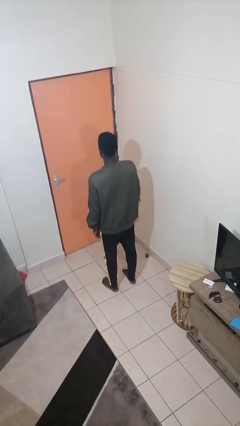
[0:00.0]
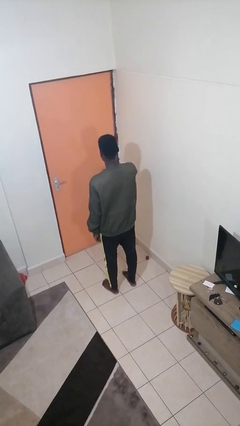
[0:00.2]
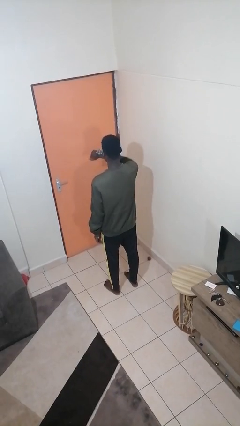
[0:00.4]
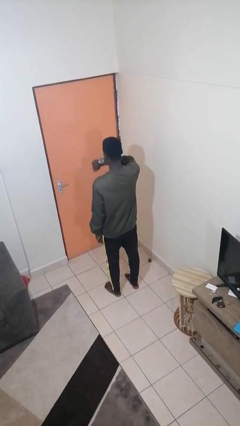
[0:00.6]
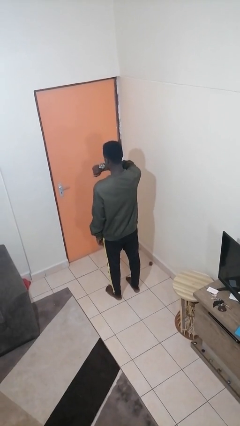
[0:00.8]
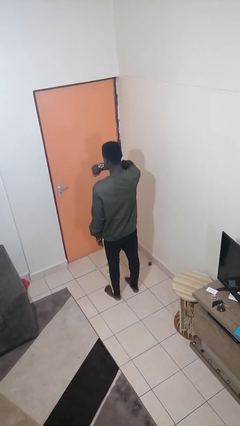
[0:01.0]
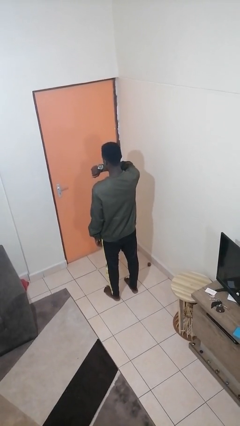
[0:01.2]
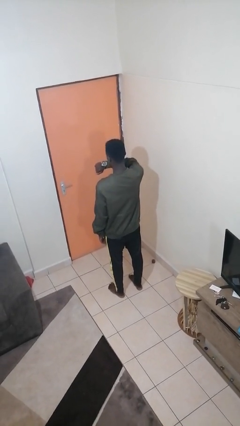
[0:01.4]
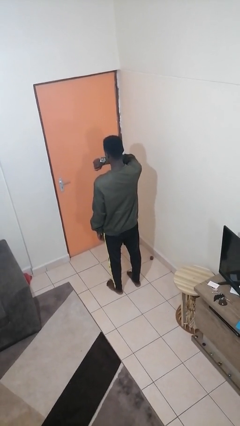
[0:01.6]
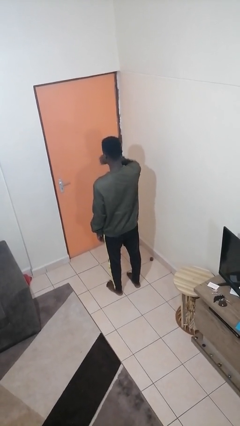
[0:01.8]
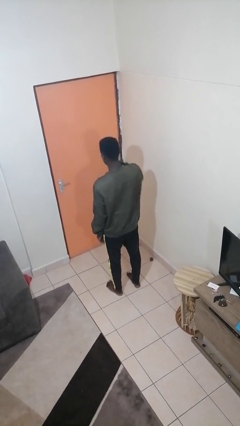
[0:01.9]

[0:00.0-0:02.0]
person looks at wristwatch

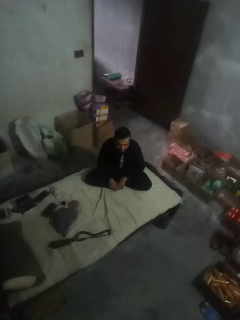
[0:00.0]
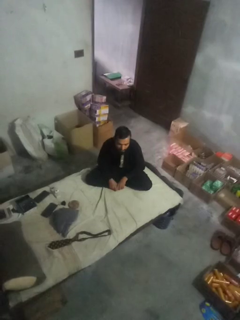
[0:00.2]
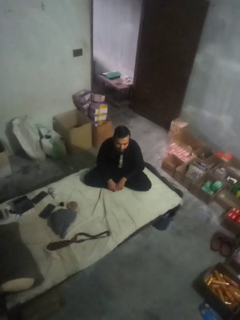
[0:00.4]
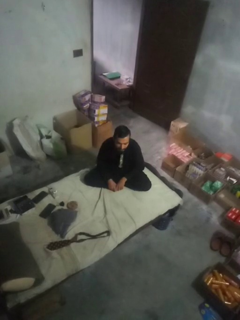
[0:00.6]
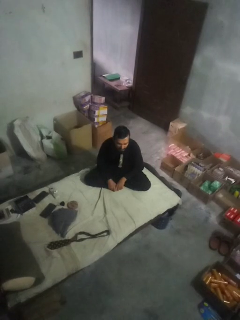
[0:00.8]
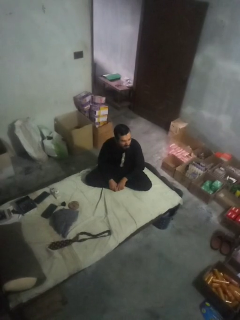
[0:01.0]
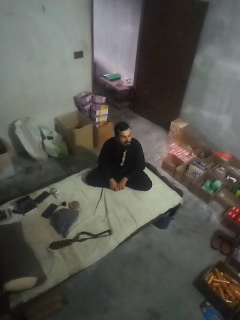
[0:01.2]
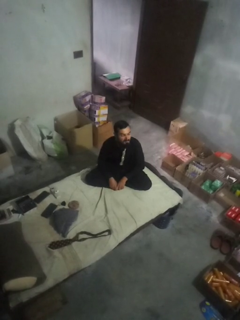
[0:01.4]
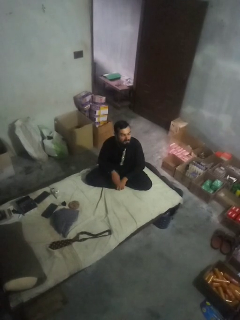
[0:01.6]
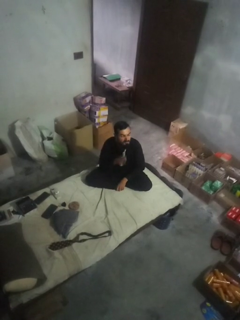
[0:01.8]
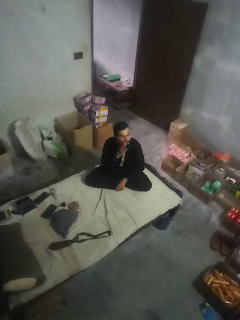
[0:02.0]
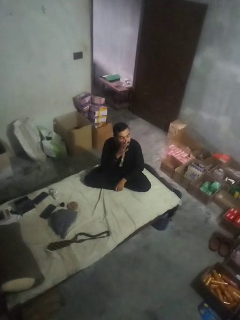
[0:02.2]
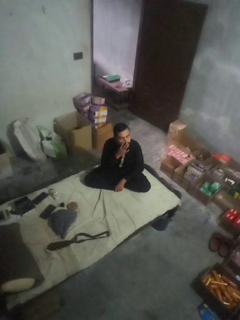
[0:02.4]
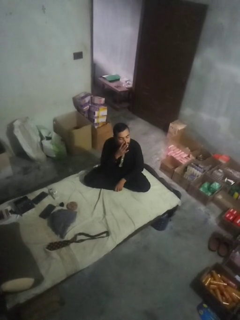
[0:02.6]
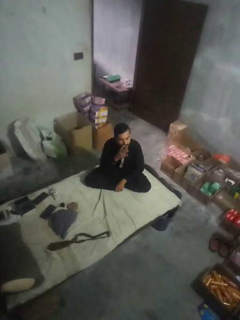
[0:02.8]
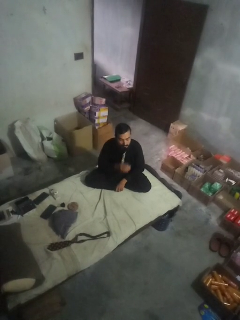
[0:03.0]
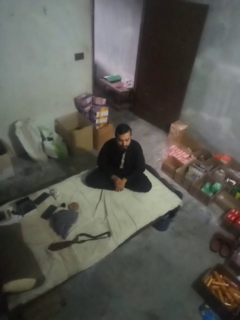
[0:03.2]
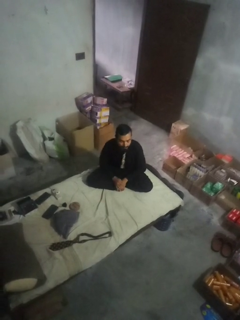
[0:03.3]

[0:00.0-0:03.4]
person blows nose

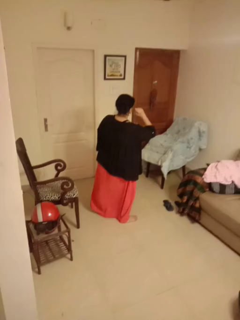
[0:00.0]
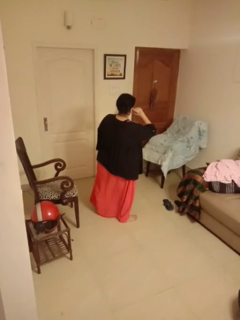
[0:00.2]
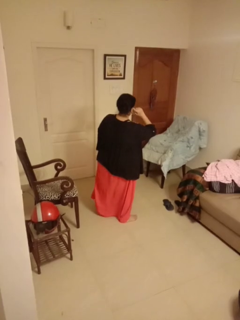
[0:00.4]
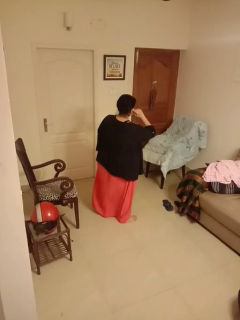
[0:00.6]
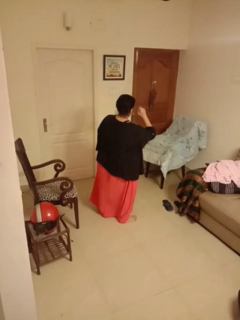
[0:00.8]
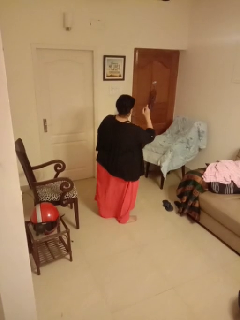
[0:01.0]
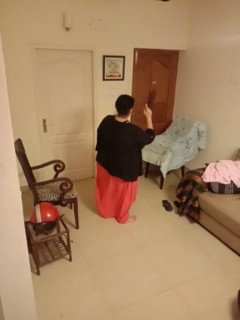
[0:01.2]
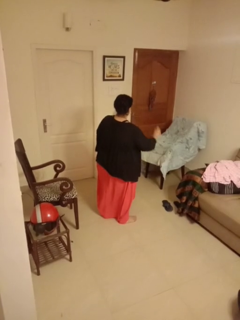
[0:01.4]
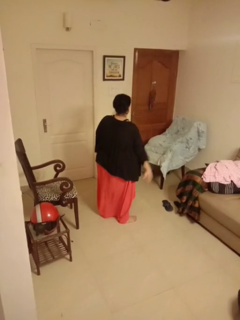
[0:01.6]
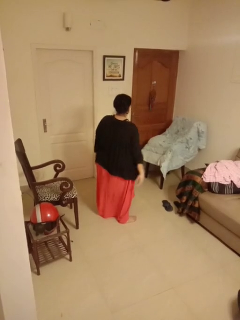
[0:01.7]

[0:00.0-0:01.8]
person gestures listen closely

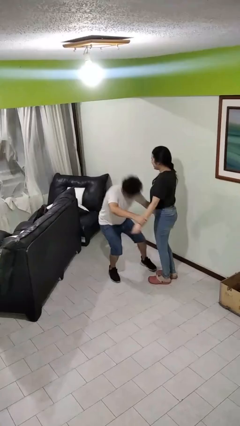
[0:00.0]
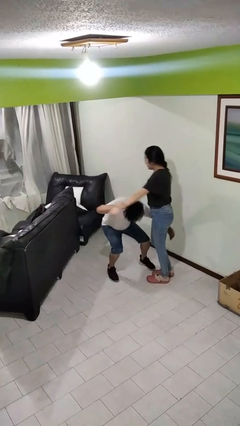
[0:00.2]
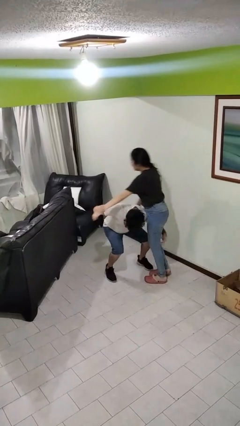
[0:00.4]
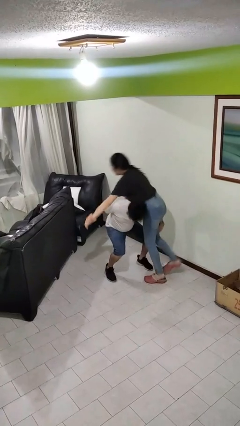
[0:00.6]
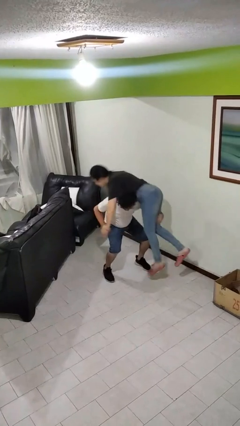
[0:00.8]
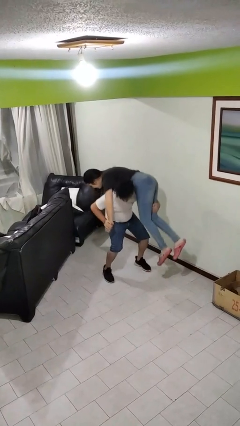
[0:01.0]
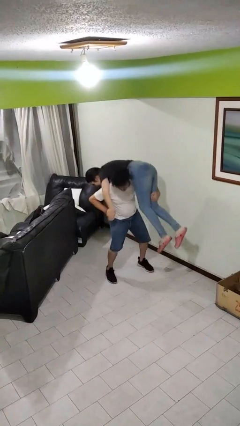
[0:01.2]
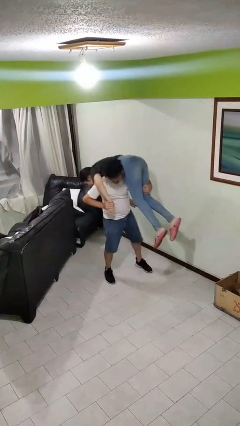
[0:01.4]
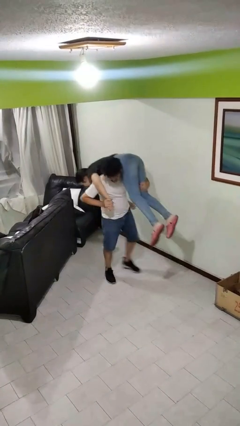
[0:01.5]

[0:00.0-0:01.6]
person carries person over shoulder

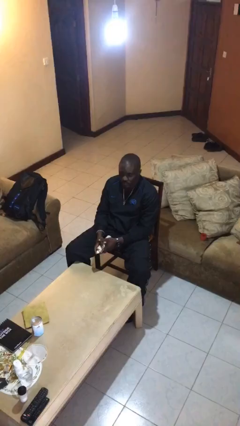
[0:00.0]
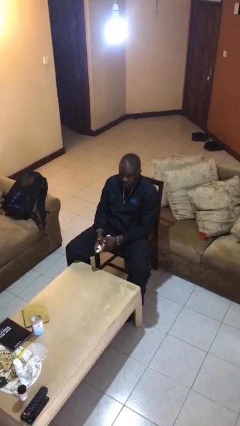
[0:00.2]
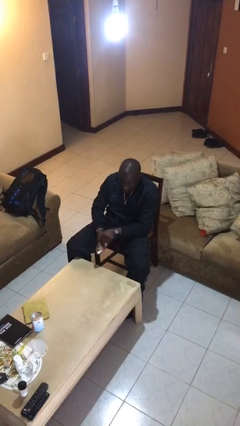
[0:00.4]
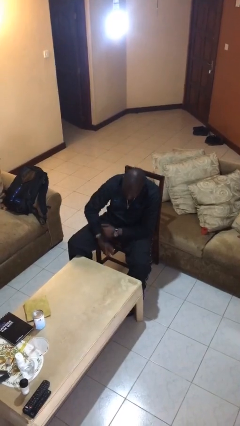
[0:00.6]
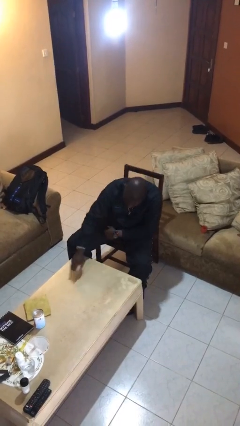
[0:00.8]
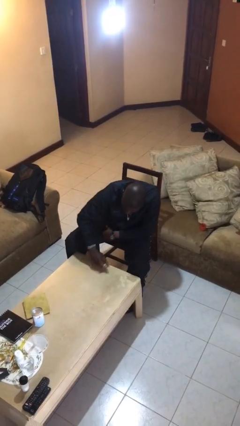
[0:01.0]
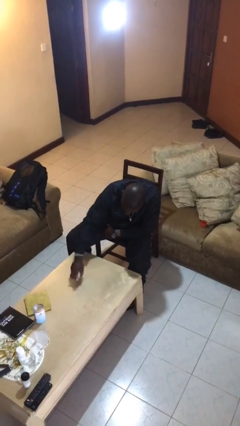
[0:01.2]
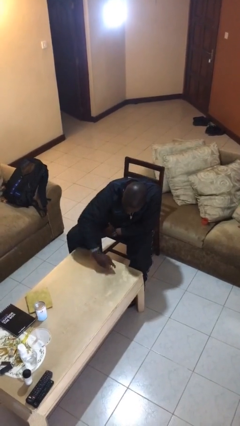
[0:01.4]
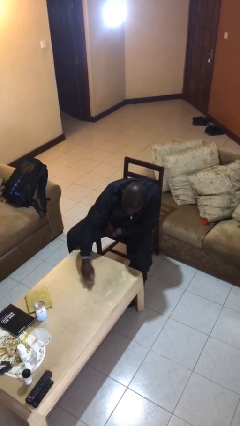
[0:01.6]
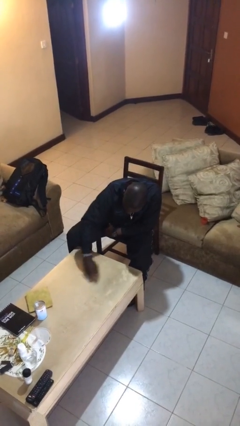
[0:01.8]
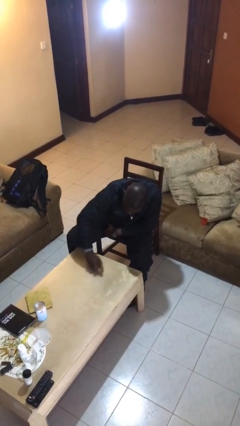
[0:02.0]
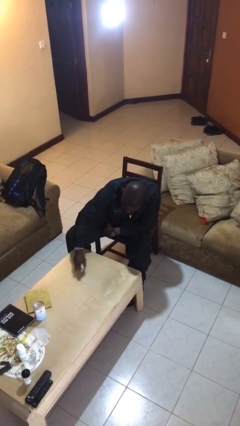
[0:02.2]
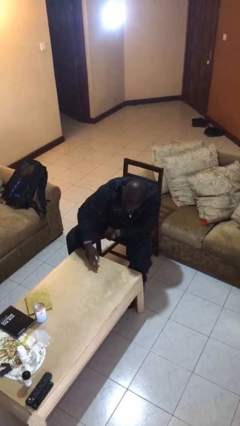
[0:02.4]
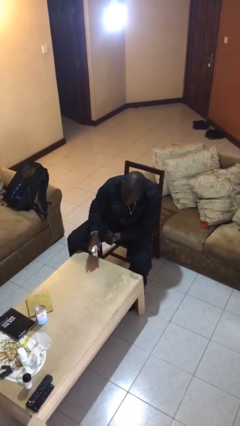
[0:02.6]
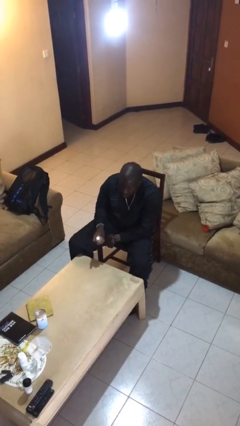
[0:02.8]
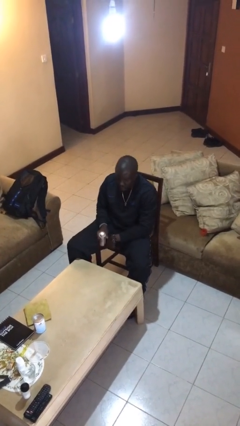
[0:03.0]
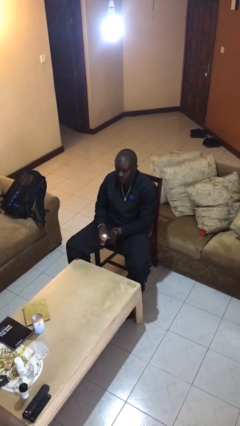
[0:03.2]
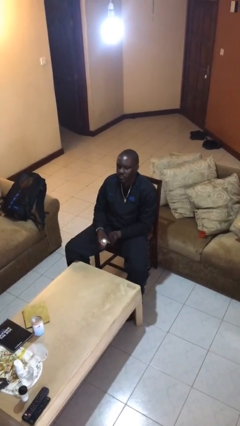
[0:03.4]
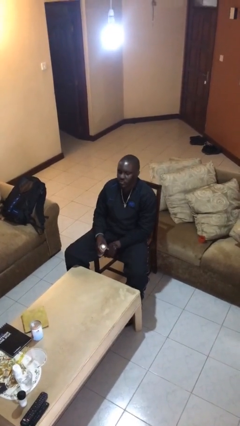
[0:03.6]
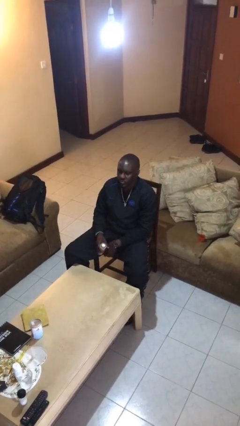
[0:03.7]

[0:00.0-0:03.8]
person sprays from bottle

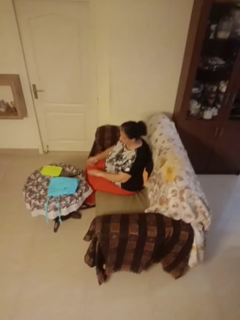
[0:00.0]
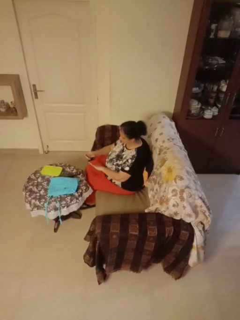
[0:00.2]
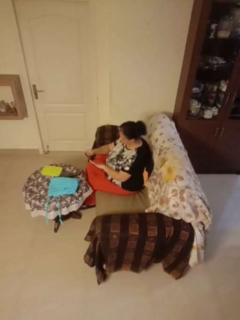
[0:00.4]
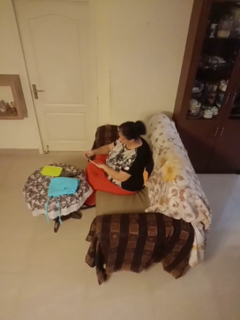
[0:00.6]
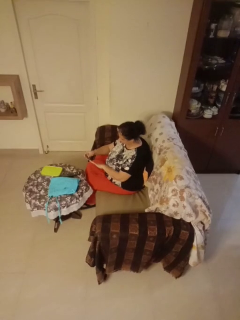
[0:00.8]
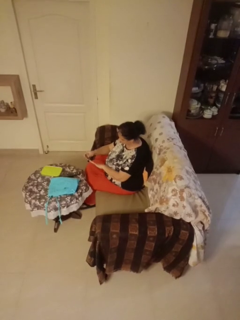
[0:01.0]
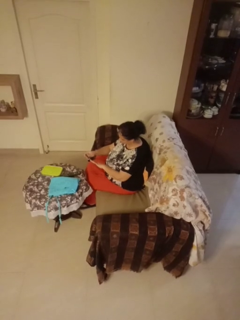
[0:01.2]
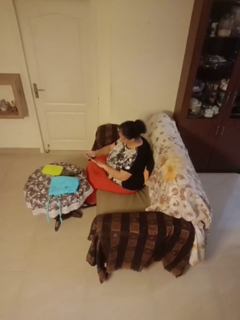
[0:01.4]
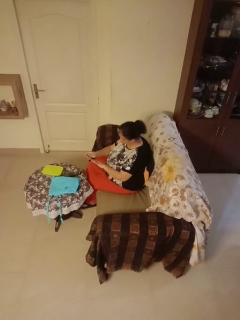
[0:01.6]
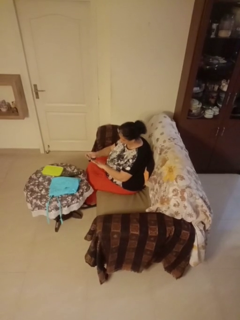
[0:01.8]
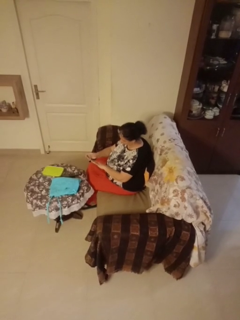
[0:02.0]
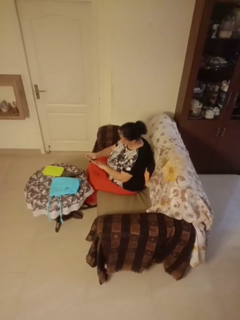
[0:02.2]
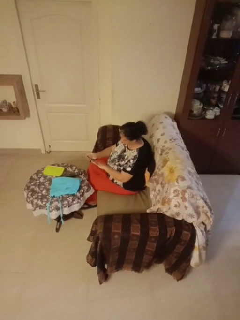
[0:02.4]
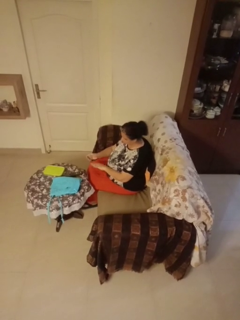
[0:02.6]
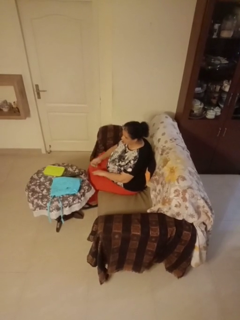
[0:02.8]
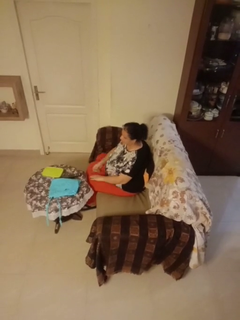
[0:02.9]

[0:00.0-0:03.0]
person clips fingernails

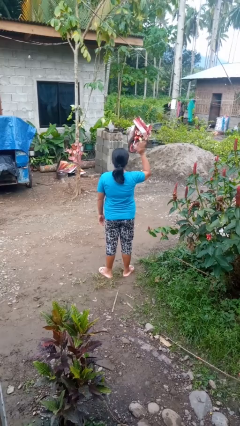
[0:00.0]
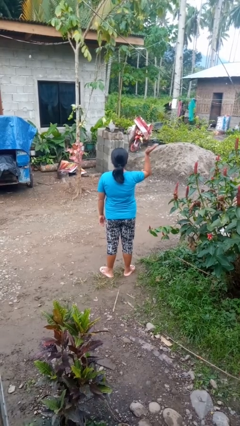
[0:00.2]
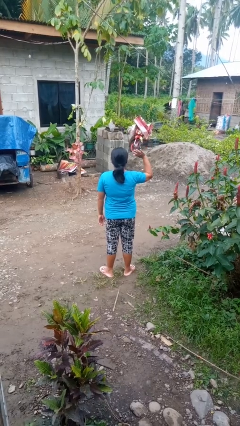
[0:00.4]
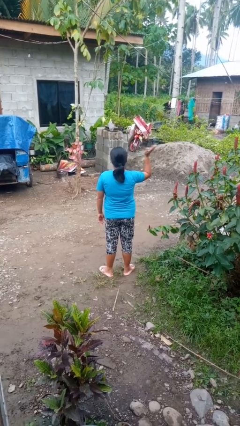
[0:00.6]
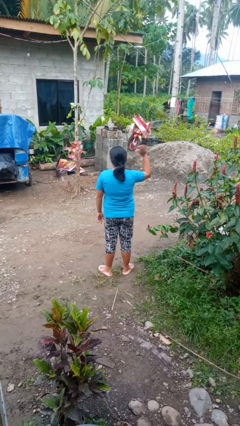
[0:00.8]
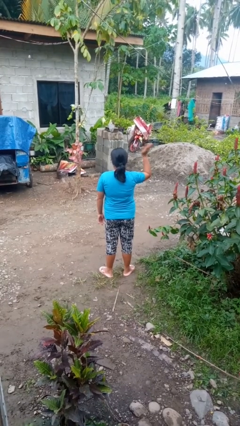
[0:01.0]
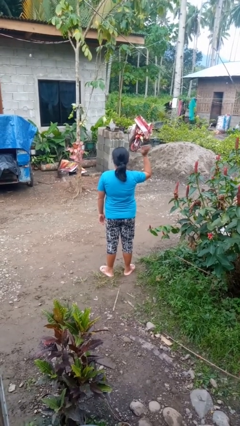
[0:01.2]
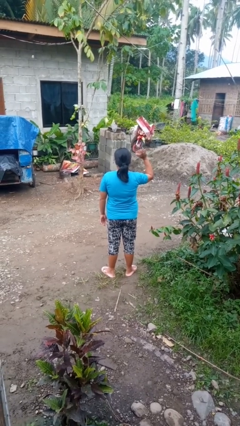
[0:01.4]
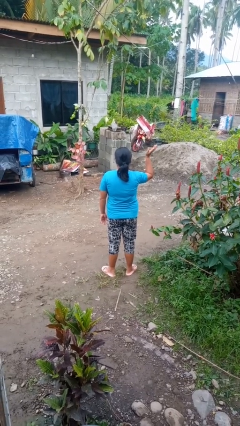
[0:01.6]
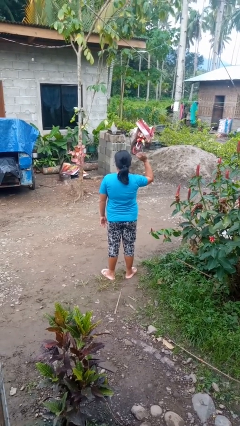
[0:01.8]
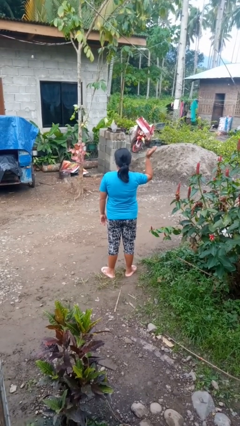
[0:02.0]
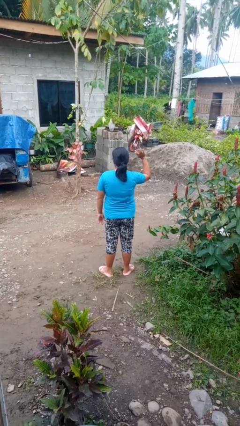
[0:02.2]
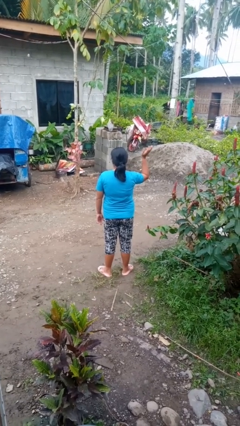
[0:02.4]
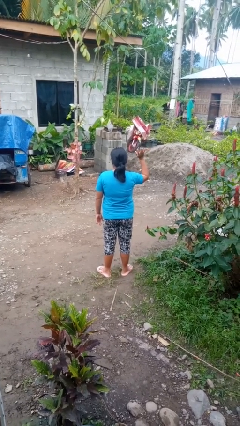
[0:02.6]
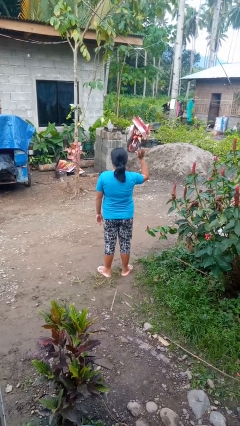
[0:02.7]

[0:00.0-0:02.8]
person waves at person

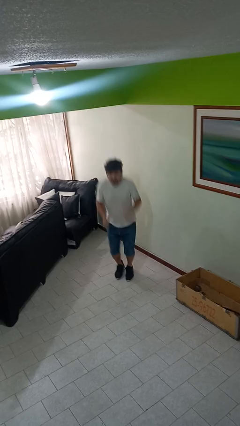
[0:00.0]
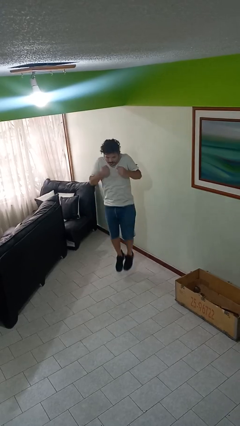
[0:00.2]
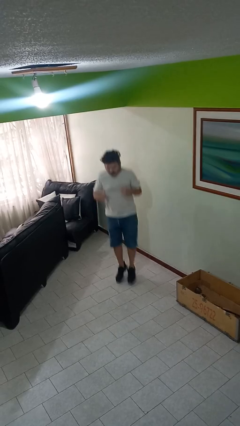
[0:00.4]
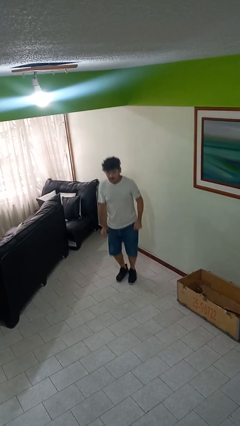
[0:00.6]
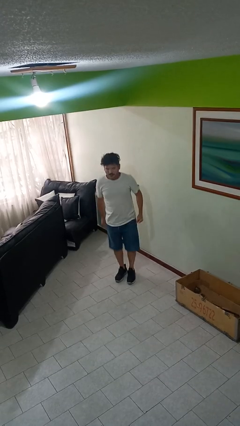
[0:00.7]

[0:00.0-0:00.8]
person jumps

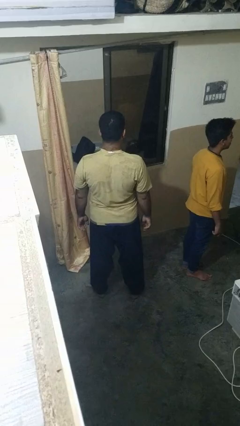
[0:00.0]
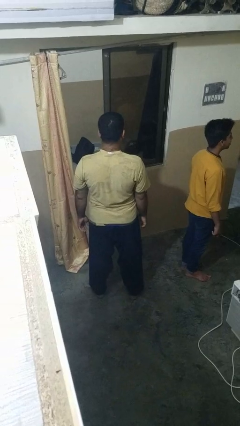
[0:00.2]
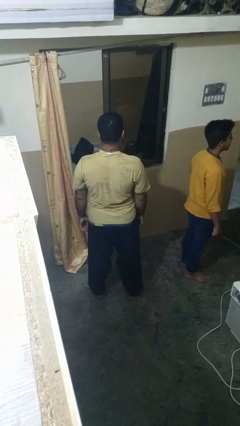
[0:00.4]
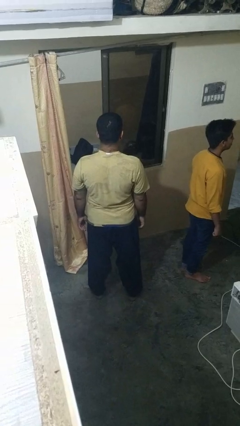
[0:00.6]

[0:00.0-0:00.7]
person points at person
